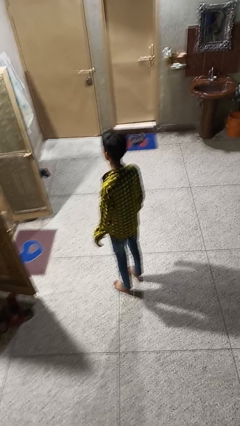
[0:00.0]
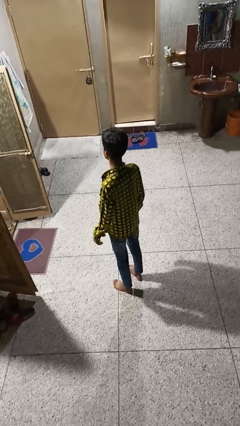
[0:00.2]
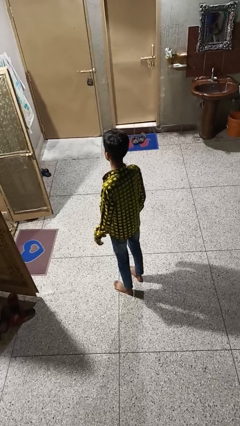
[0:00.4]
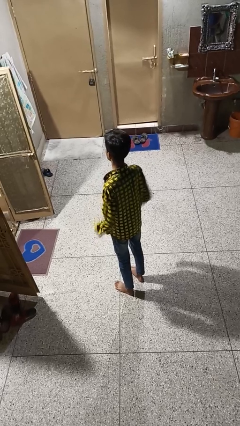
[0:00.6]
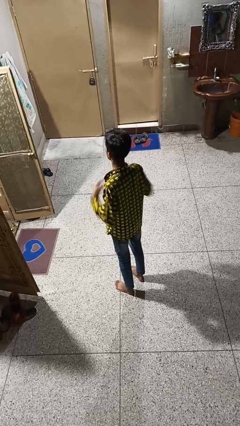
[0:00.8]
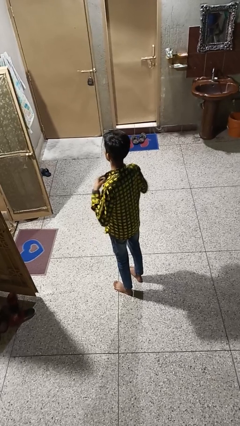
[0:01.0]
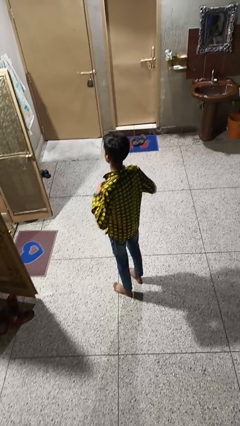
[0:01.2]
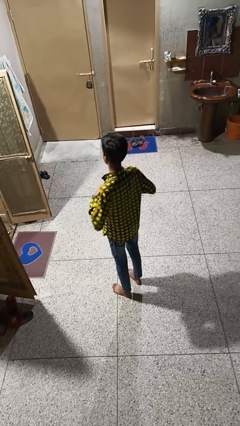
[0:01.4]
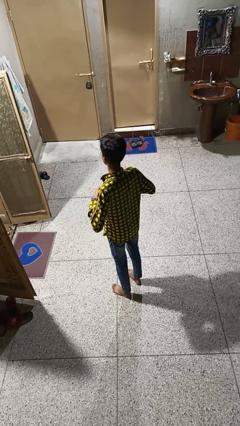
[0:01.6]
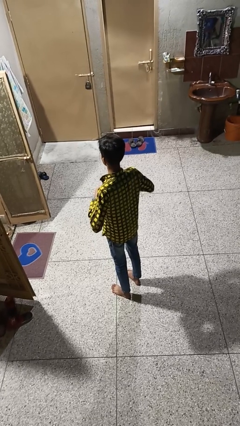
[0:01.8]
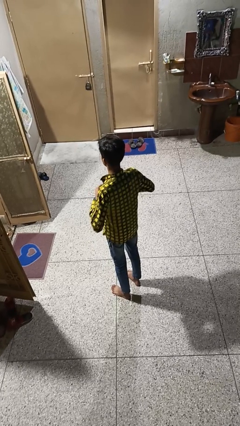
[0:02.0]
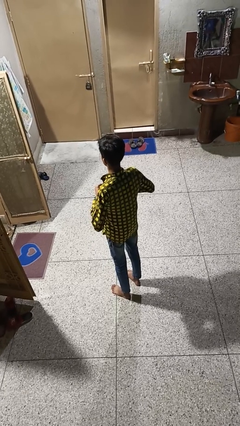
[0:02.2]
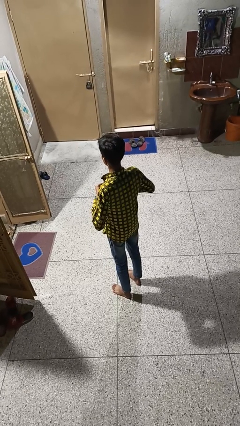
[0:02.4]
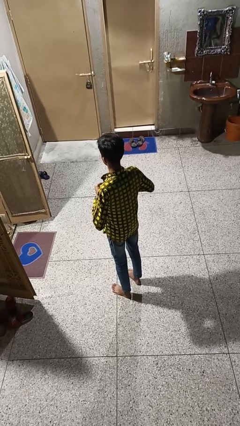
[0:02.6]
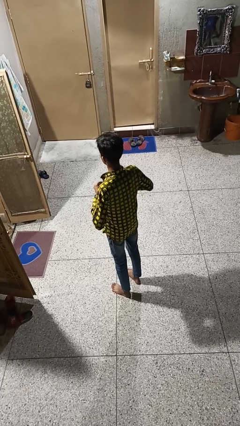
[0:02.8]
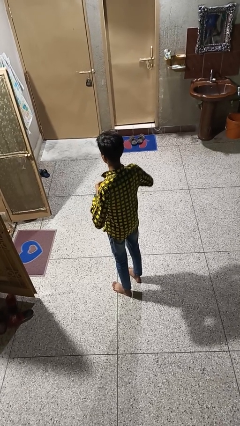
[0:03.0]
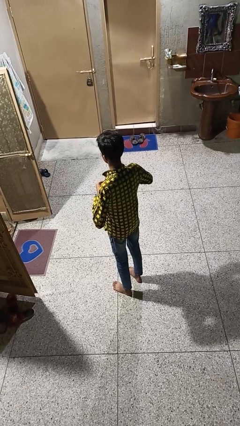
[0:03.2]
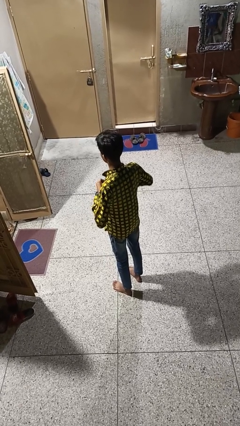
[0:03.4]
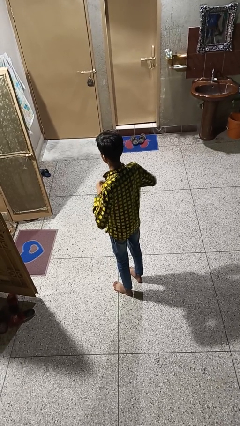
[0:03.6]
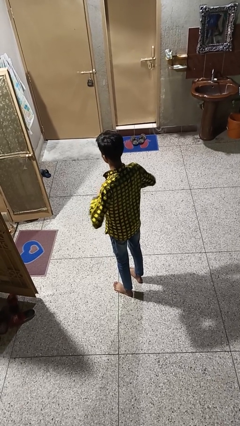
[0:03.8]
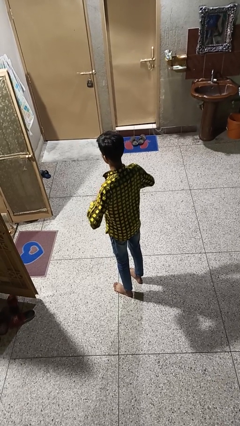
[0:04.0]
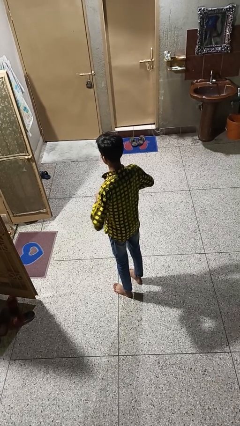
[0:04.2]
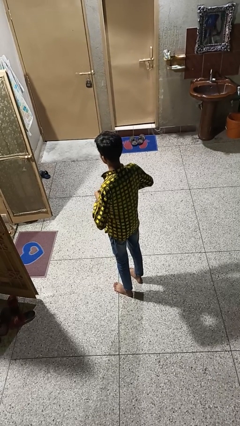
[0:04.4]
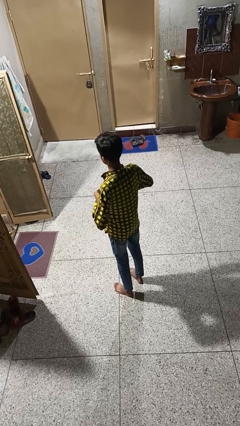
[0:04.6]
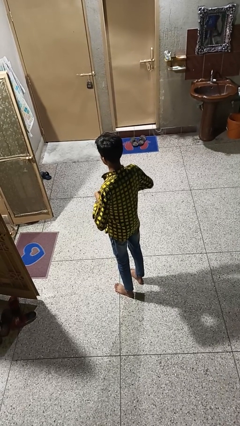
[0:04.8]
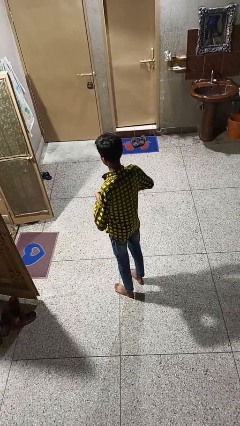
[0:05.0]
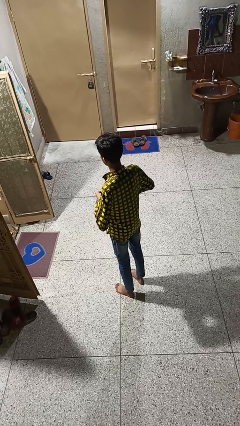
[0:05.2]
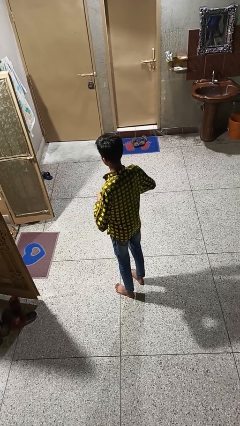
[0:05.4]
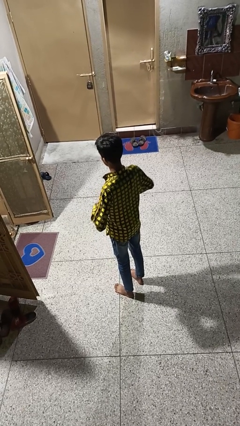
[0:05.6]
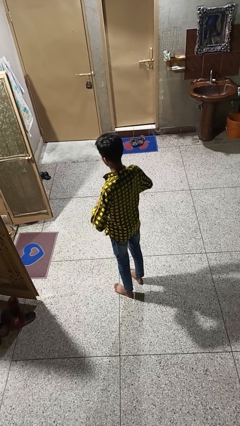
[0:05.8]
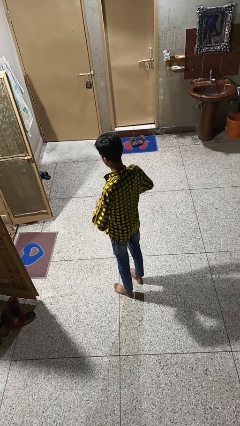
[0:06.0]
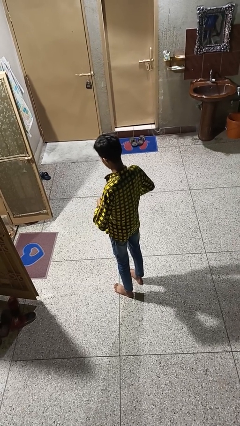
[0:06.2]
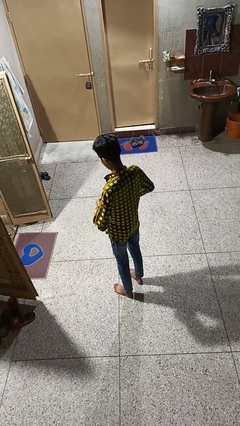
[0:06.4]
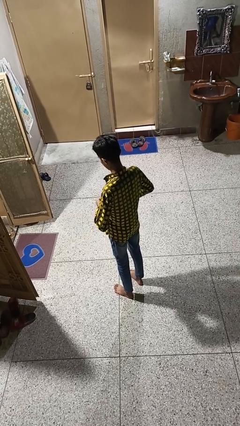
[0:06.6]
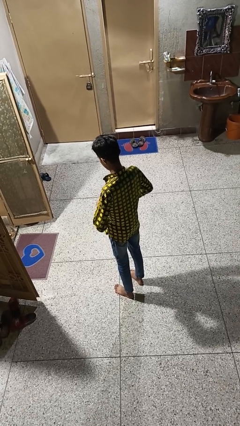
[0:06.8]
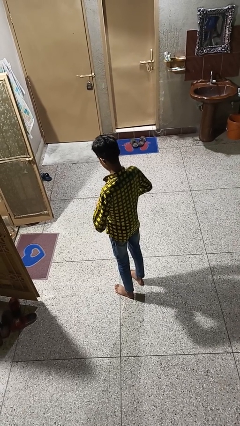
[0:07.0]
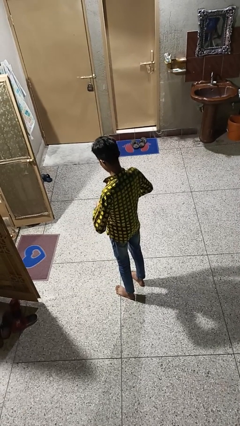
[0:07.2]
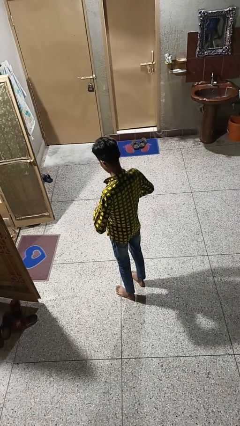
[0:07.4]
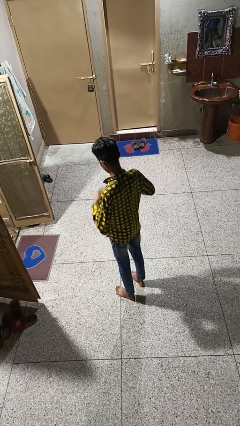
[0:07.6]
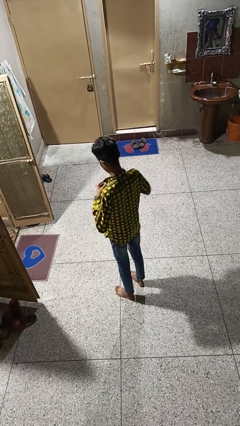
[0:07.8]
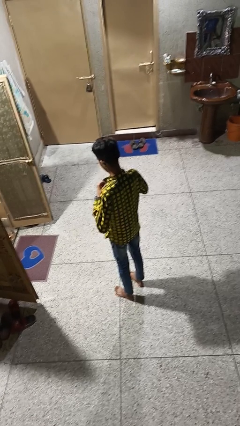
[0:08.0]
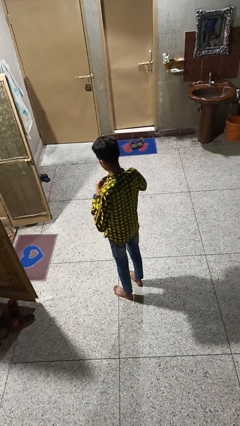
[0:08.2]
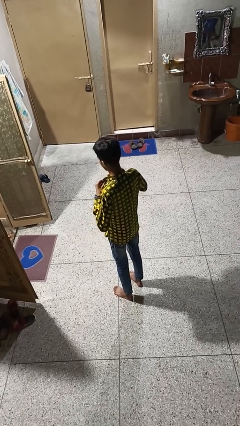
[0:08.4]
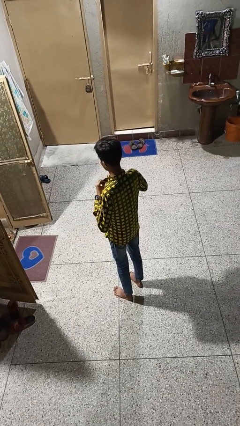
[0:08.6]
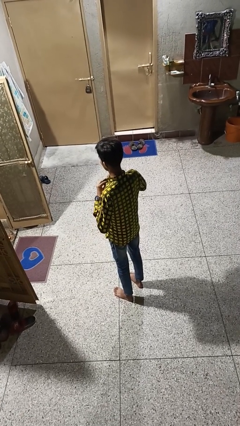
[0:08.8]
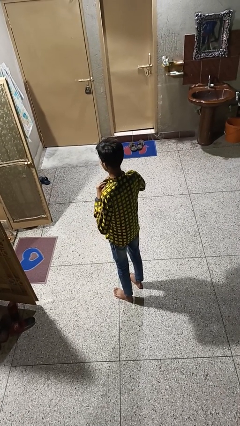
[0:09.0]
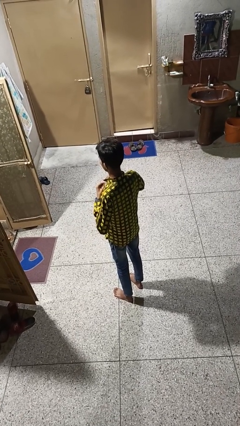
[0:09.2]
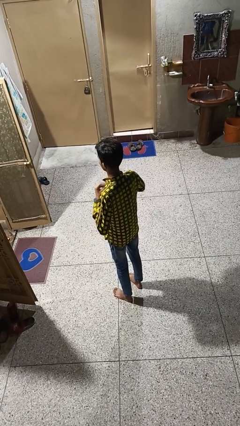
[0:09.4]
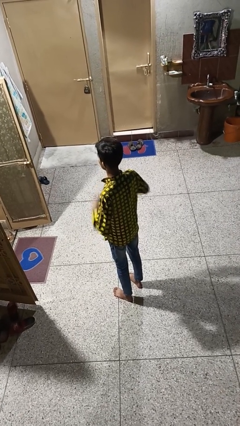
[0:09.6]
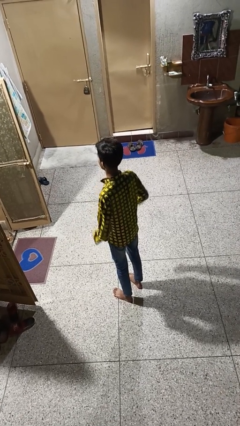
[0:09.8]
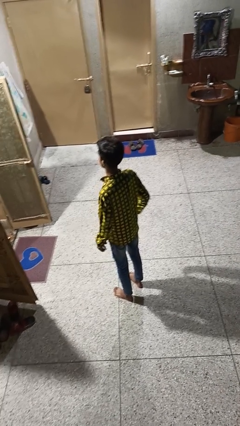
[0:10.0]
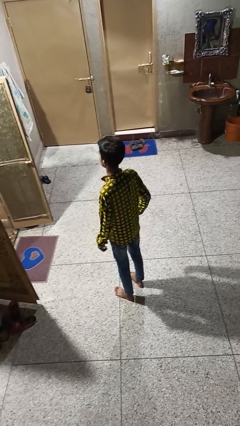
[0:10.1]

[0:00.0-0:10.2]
person buttons shirt

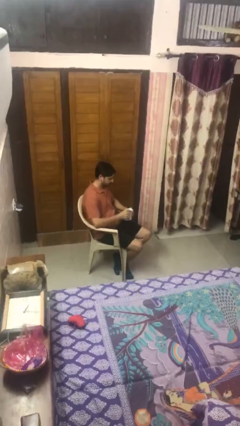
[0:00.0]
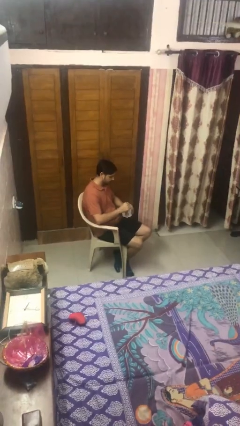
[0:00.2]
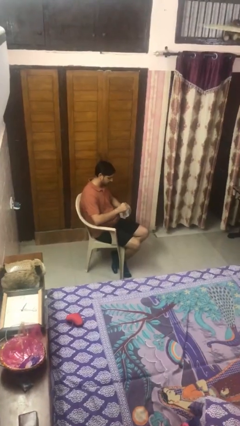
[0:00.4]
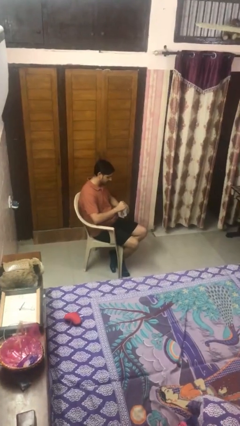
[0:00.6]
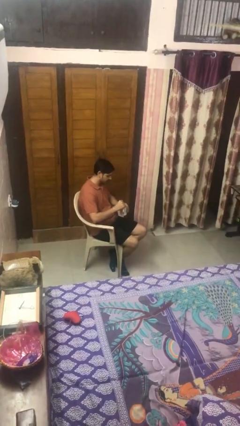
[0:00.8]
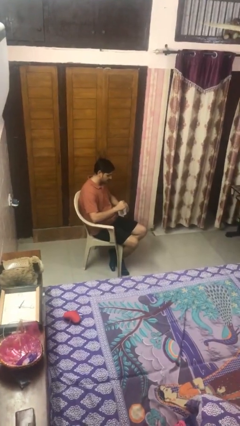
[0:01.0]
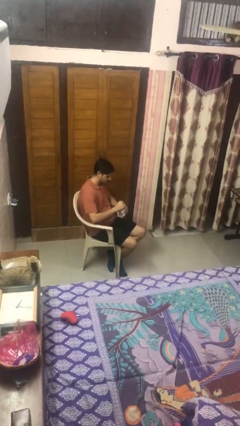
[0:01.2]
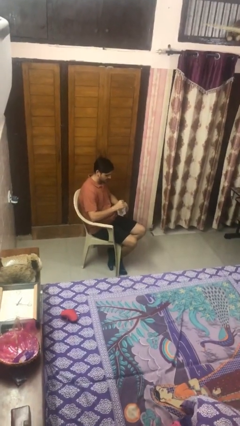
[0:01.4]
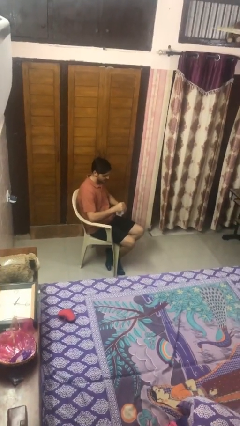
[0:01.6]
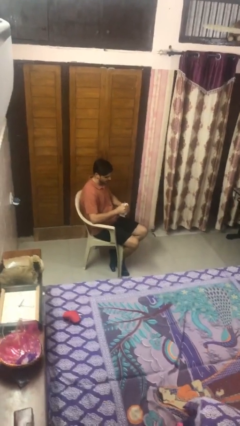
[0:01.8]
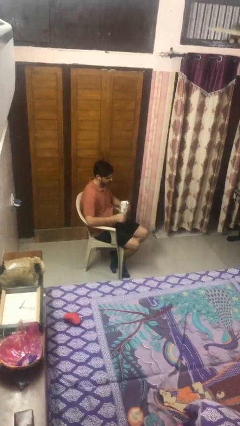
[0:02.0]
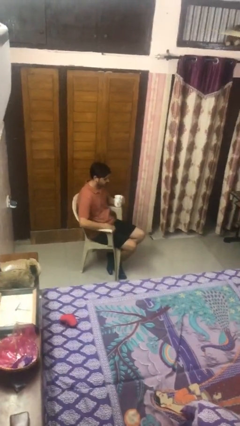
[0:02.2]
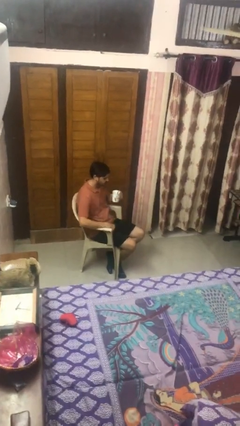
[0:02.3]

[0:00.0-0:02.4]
person stirs mug

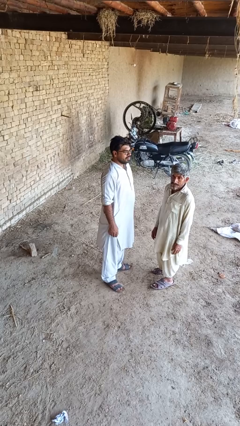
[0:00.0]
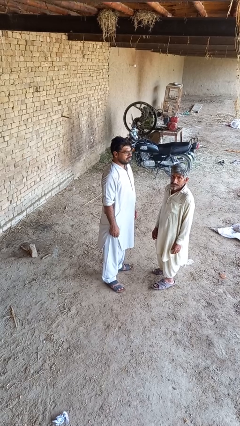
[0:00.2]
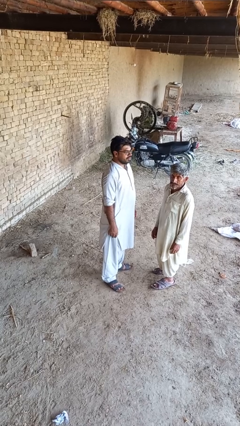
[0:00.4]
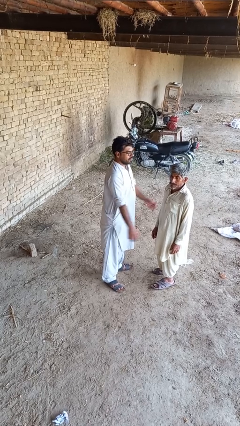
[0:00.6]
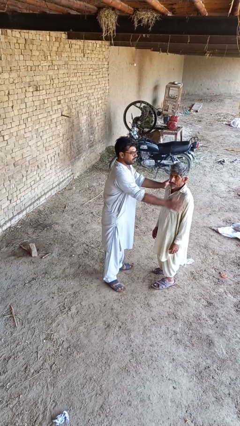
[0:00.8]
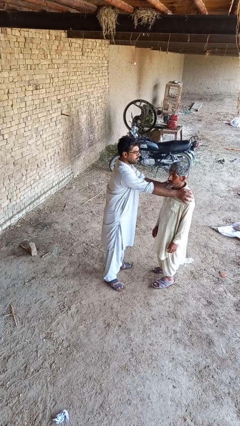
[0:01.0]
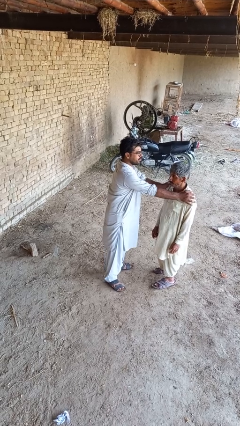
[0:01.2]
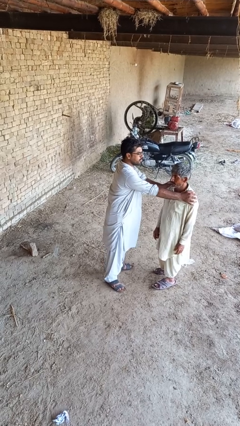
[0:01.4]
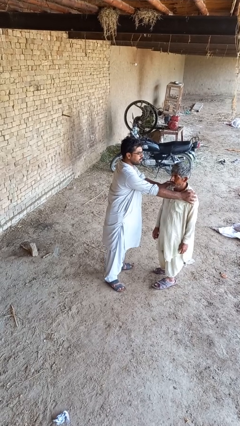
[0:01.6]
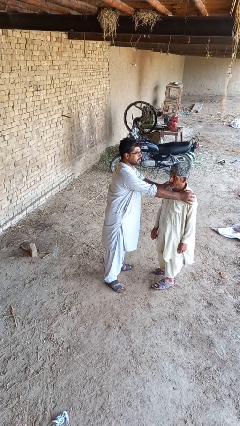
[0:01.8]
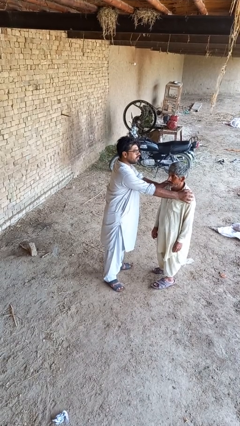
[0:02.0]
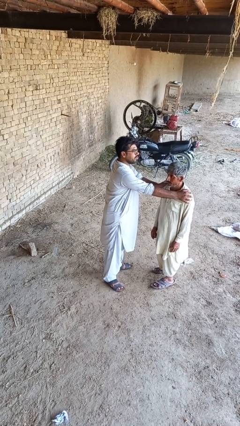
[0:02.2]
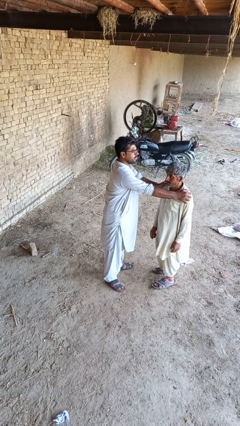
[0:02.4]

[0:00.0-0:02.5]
person grabs person by shoulder

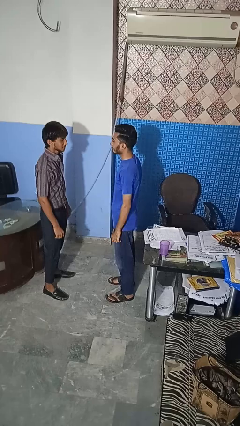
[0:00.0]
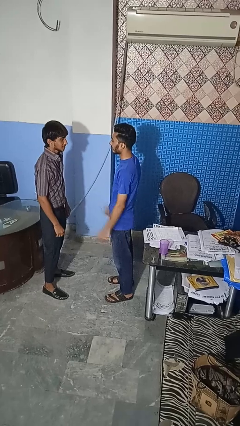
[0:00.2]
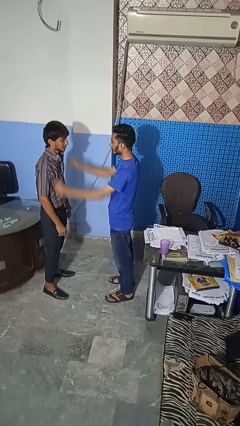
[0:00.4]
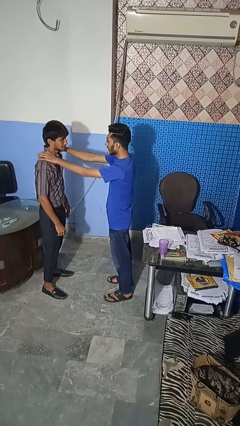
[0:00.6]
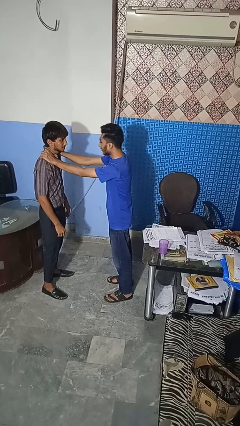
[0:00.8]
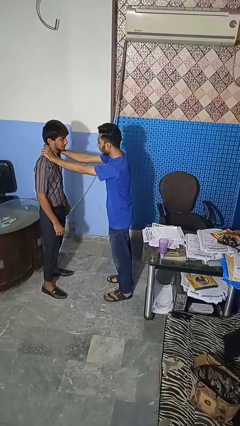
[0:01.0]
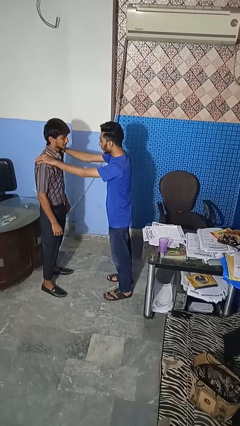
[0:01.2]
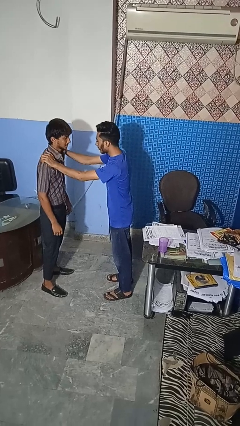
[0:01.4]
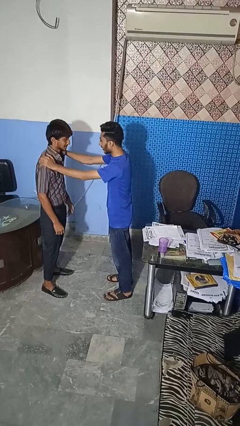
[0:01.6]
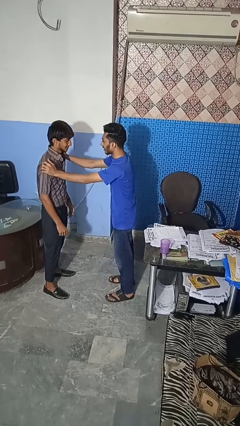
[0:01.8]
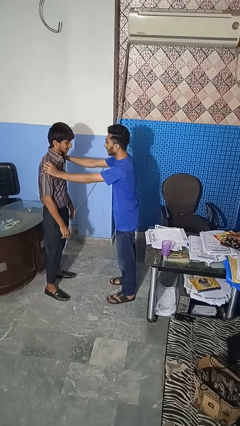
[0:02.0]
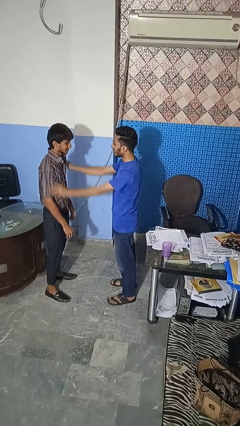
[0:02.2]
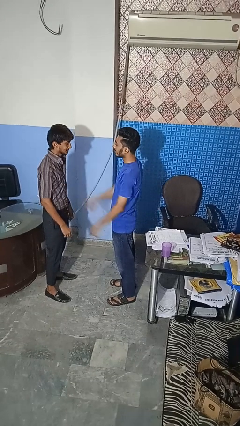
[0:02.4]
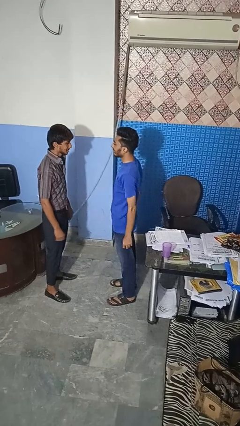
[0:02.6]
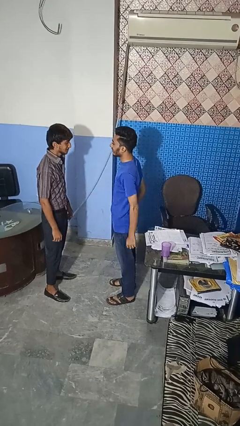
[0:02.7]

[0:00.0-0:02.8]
person pounds shoulders of person

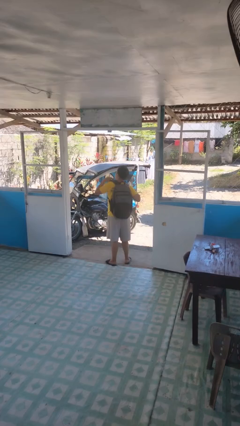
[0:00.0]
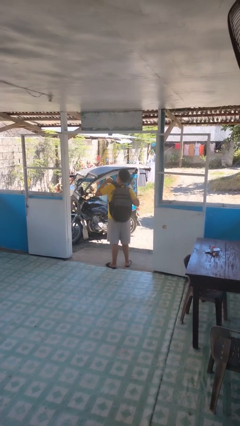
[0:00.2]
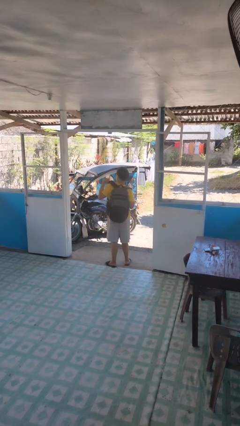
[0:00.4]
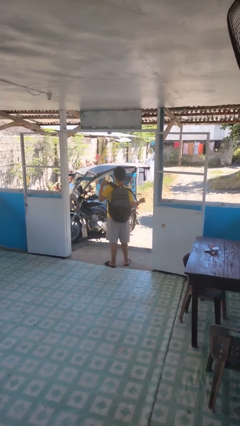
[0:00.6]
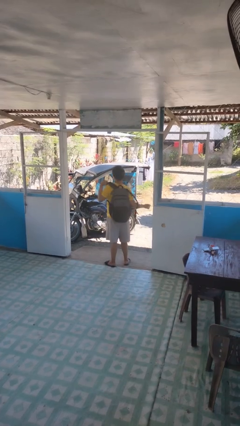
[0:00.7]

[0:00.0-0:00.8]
person takes off backpack
